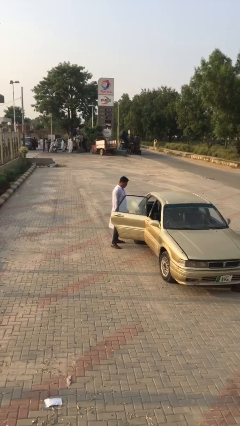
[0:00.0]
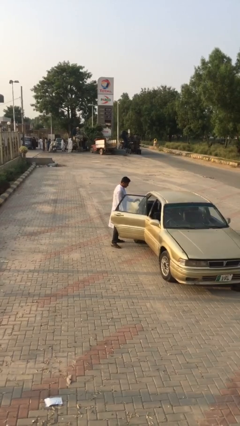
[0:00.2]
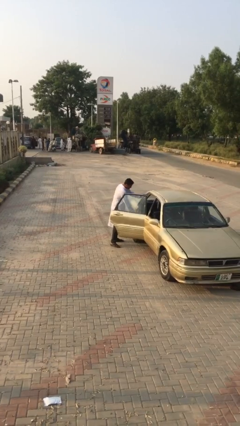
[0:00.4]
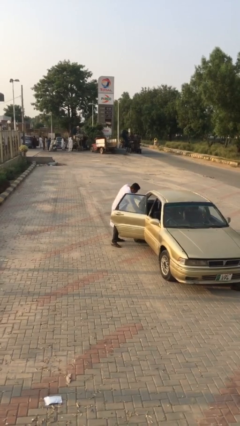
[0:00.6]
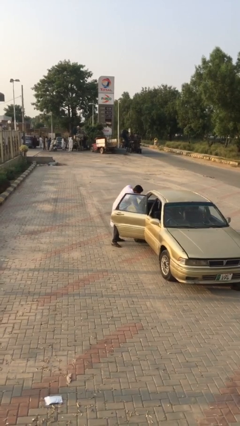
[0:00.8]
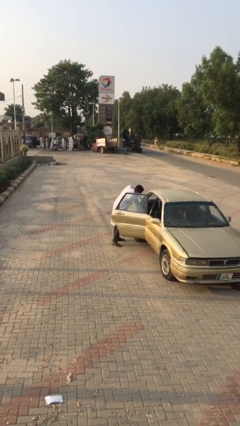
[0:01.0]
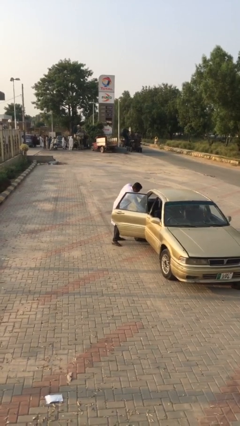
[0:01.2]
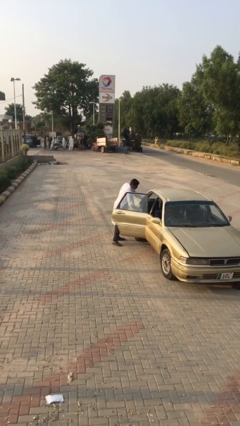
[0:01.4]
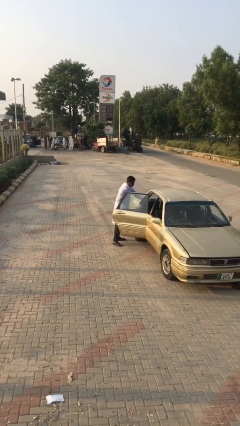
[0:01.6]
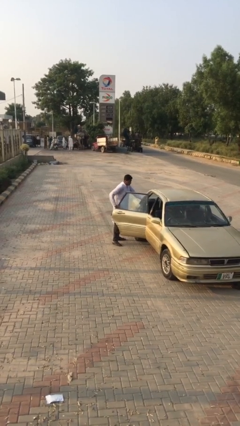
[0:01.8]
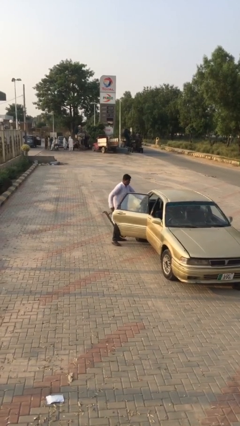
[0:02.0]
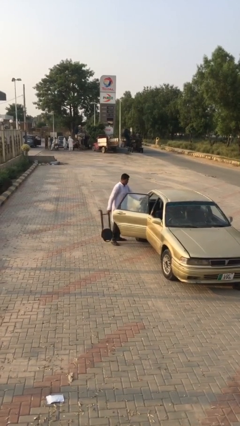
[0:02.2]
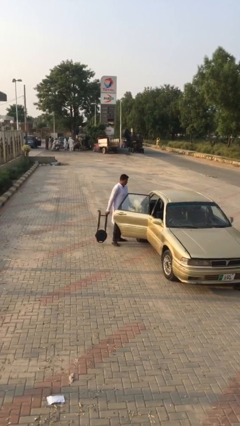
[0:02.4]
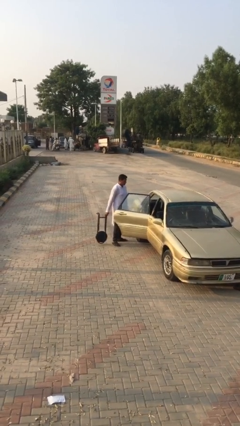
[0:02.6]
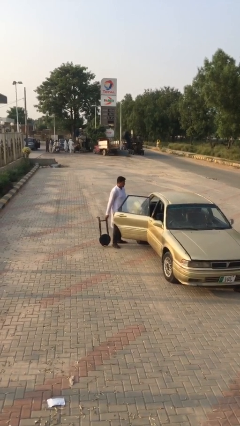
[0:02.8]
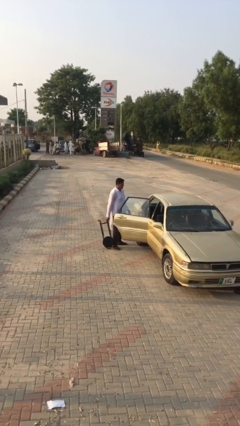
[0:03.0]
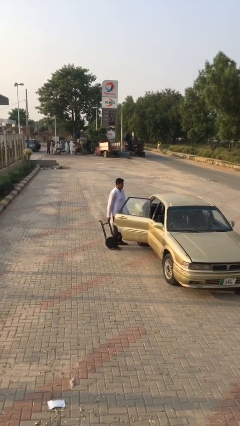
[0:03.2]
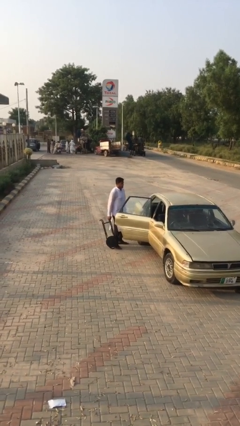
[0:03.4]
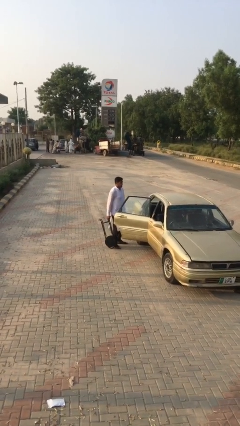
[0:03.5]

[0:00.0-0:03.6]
person unloads car

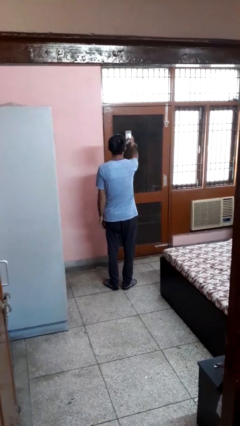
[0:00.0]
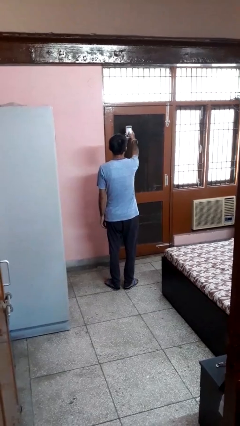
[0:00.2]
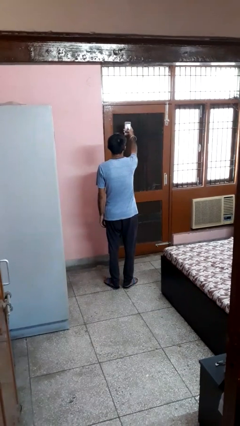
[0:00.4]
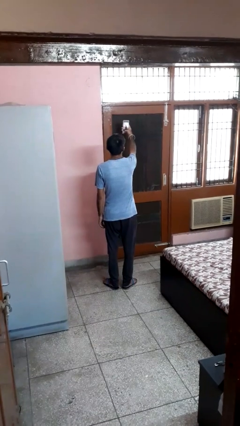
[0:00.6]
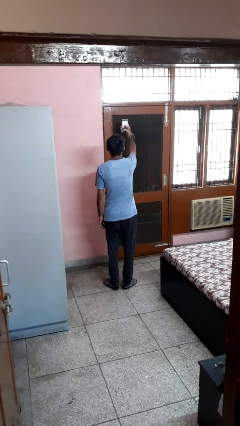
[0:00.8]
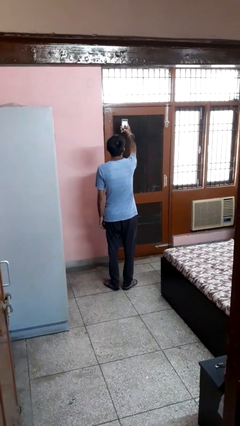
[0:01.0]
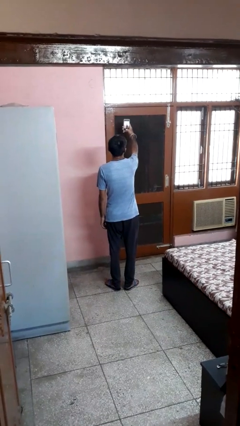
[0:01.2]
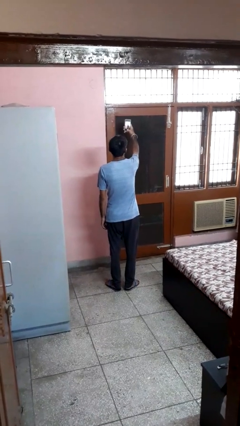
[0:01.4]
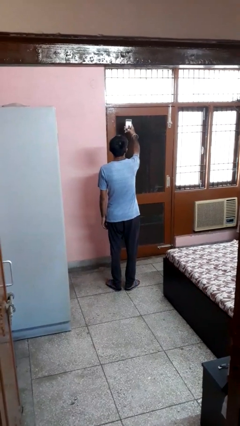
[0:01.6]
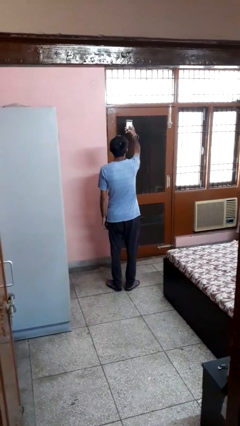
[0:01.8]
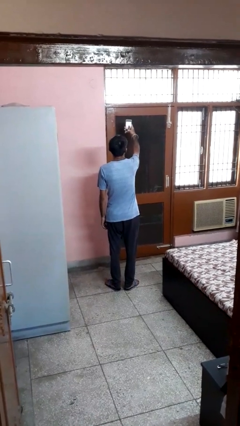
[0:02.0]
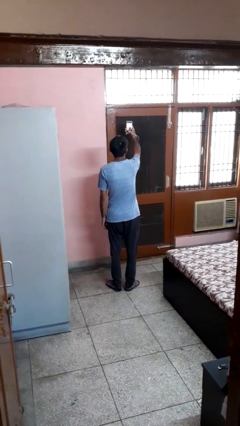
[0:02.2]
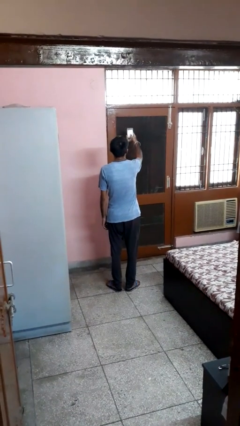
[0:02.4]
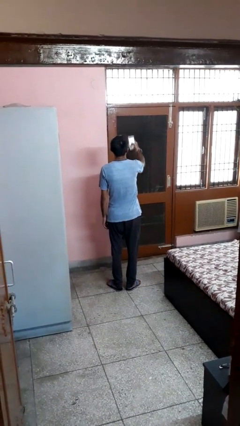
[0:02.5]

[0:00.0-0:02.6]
person takes selfie

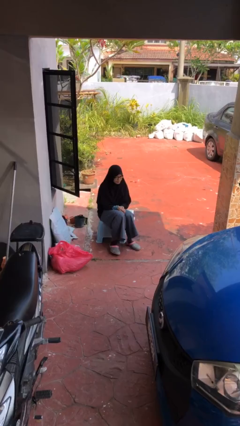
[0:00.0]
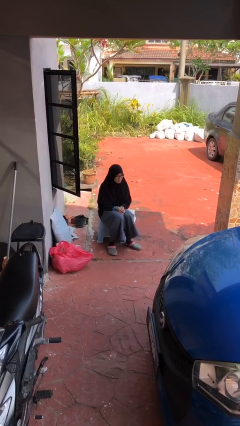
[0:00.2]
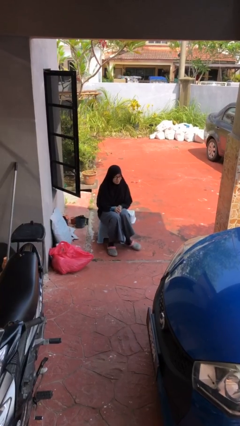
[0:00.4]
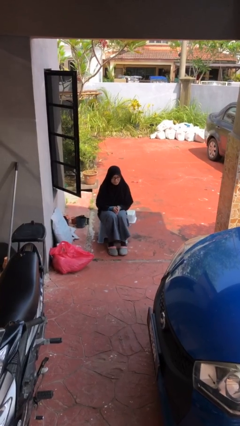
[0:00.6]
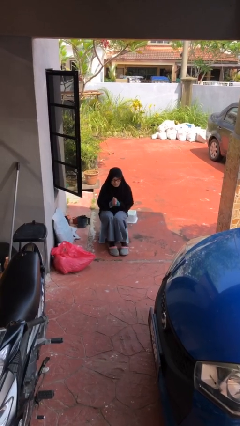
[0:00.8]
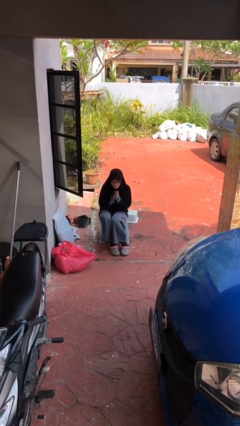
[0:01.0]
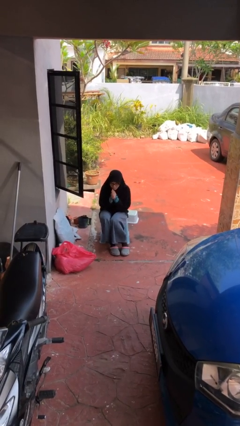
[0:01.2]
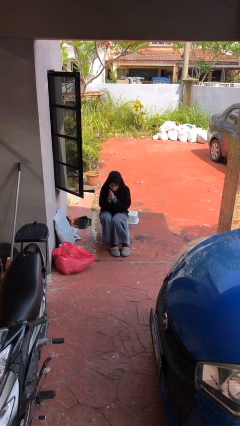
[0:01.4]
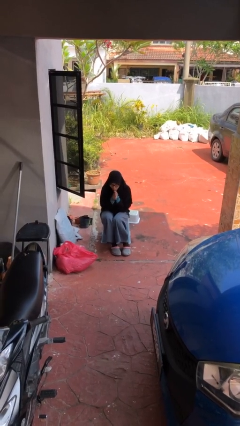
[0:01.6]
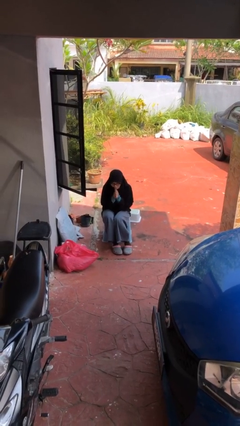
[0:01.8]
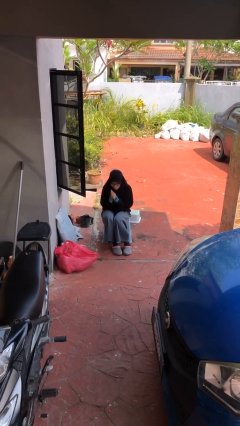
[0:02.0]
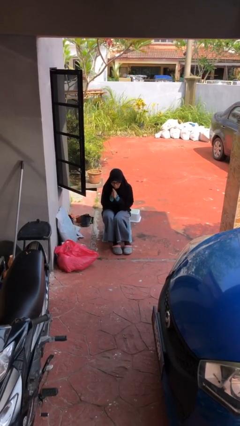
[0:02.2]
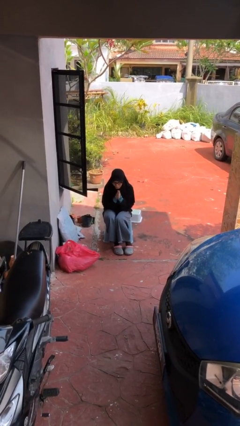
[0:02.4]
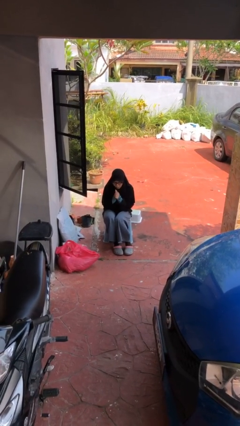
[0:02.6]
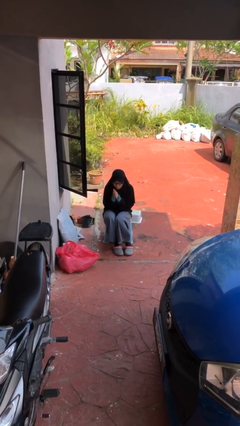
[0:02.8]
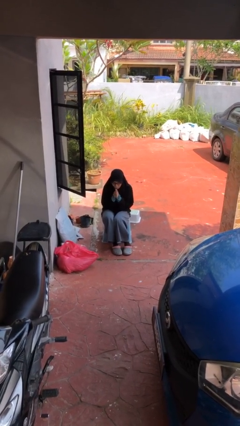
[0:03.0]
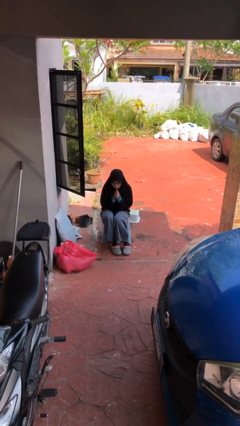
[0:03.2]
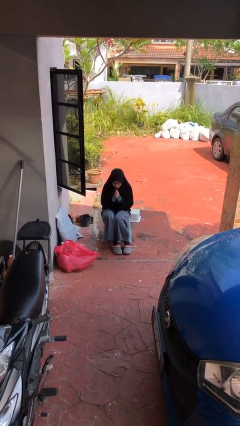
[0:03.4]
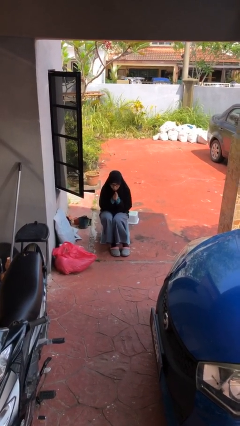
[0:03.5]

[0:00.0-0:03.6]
person blows into hands

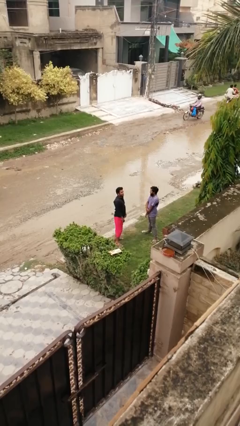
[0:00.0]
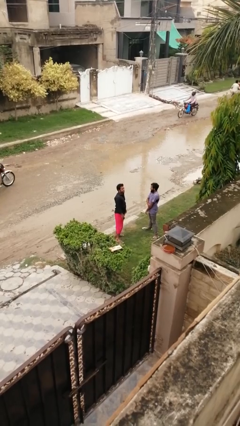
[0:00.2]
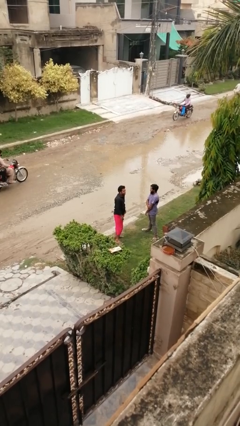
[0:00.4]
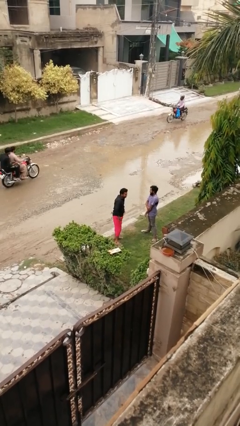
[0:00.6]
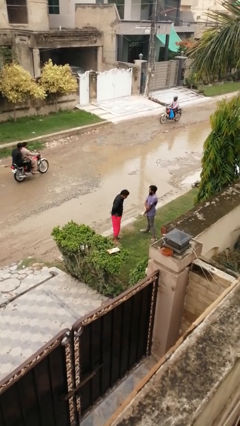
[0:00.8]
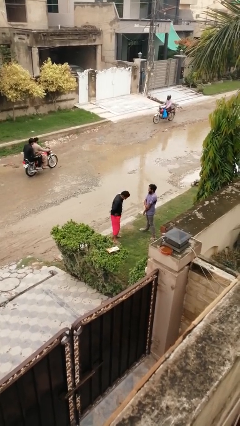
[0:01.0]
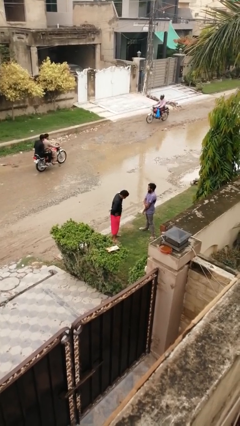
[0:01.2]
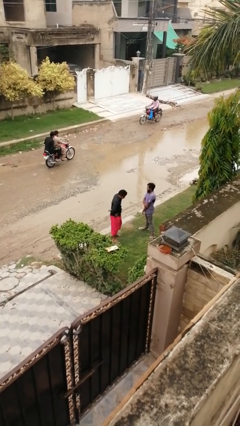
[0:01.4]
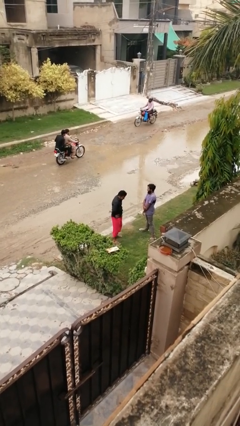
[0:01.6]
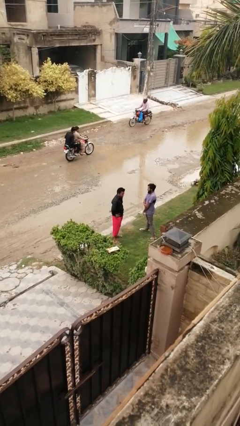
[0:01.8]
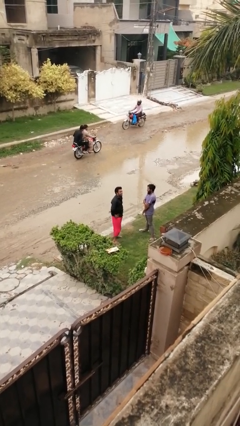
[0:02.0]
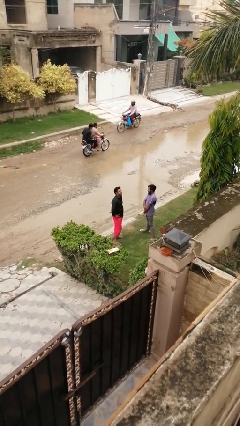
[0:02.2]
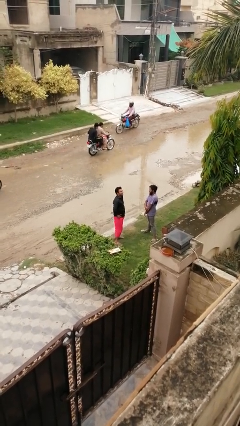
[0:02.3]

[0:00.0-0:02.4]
person laughs with person

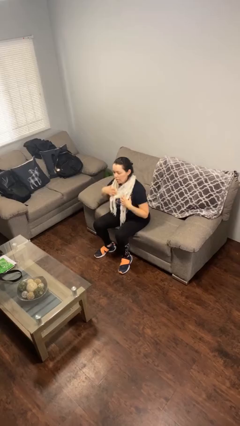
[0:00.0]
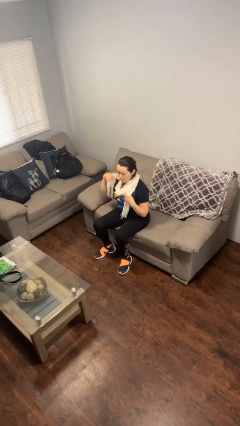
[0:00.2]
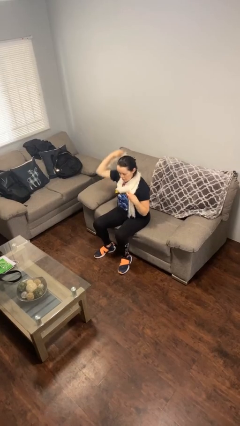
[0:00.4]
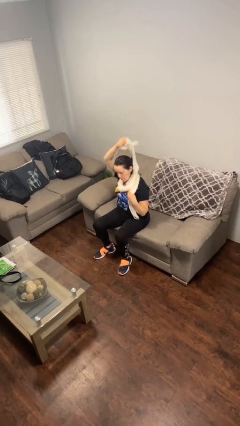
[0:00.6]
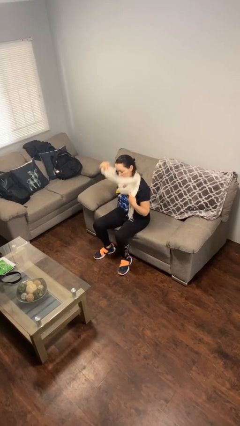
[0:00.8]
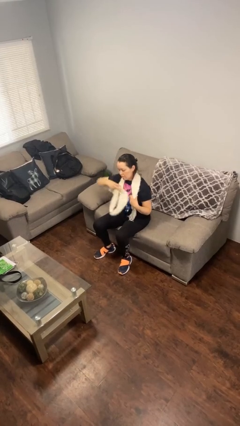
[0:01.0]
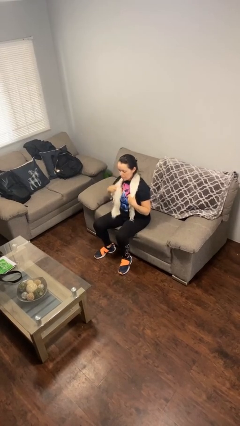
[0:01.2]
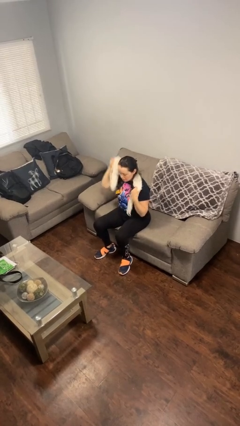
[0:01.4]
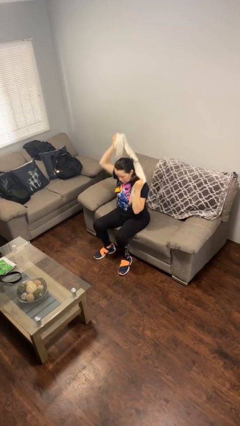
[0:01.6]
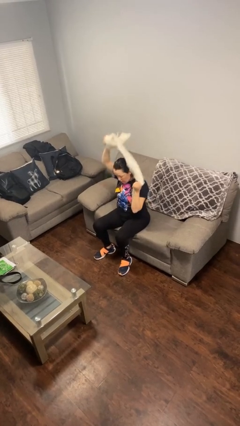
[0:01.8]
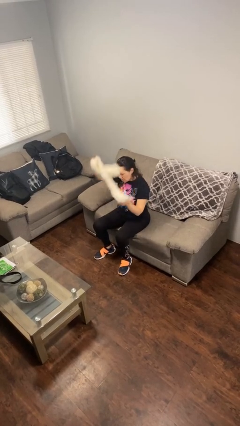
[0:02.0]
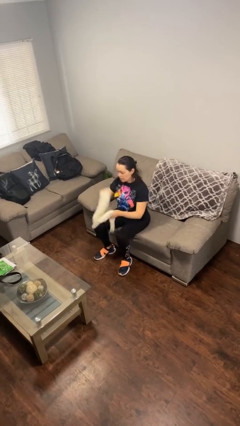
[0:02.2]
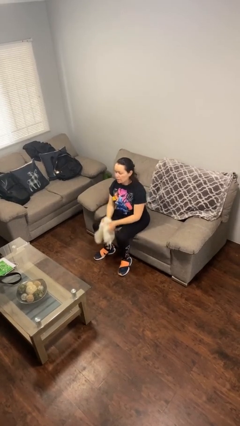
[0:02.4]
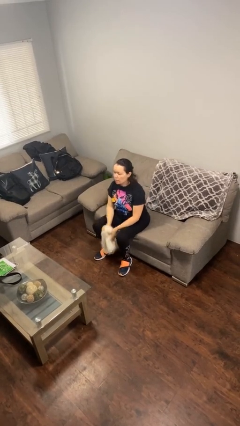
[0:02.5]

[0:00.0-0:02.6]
person takes off scarf

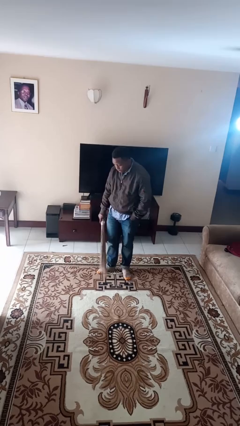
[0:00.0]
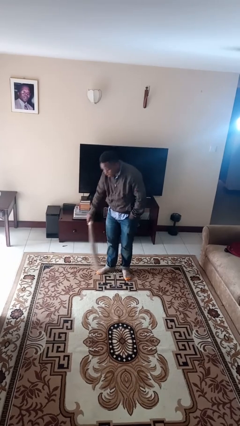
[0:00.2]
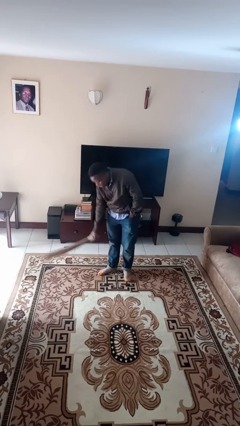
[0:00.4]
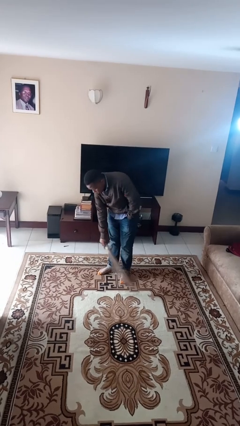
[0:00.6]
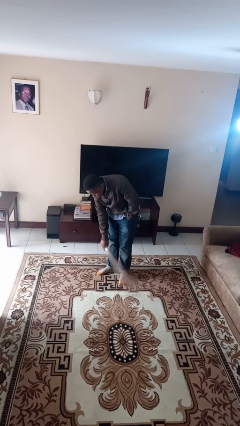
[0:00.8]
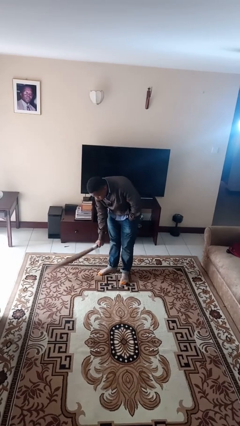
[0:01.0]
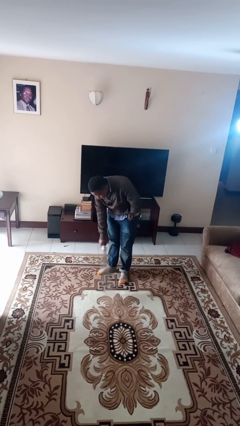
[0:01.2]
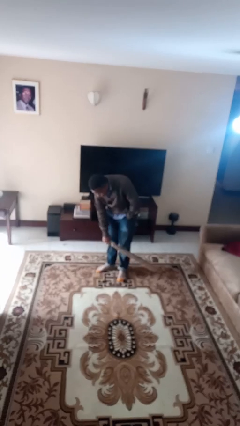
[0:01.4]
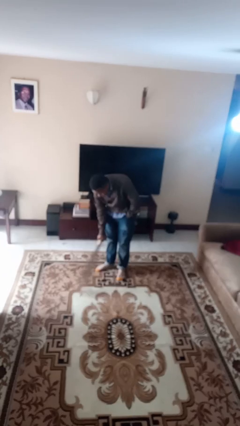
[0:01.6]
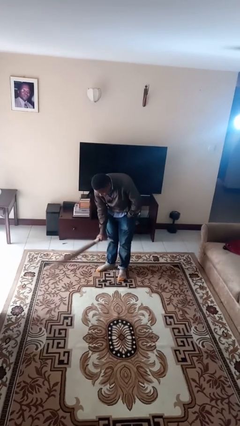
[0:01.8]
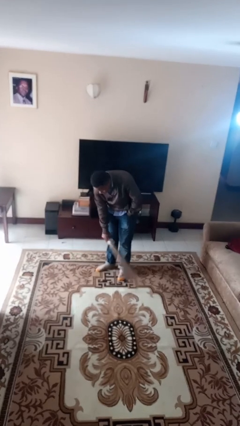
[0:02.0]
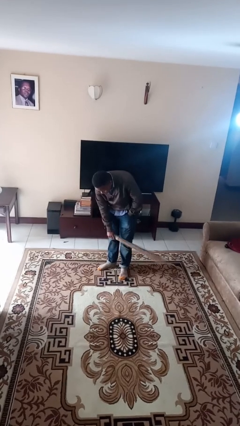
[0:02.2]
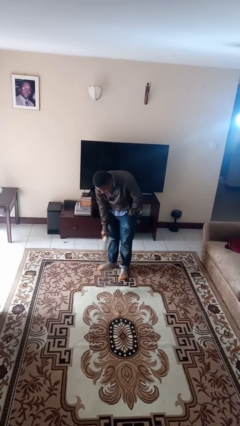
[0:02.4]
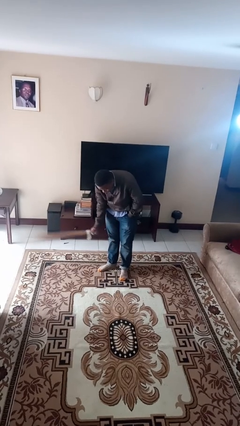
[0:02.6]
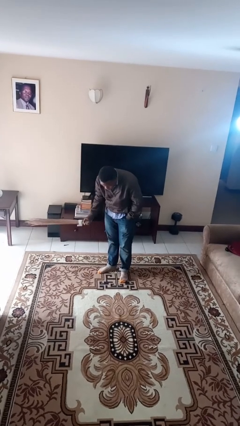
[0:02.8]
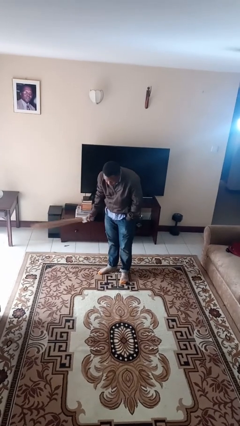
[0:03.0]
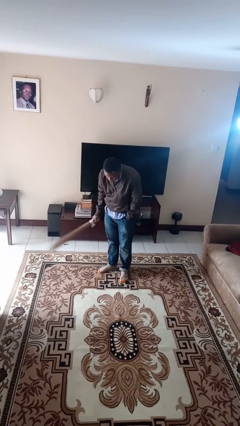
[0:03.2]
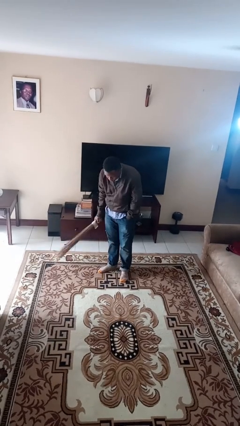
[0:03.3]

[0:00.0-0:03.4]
person sweeps floor
